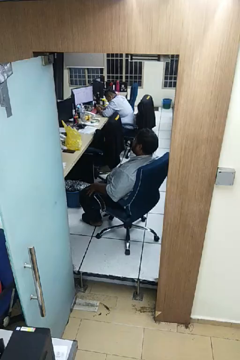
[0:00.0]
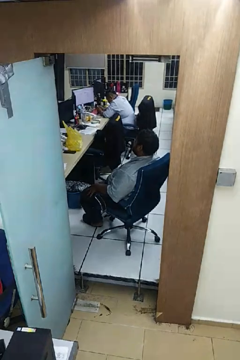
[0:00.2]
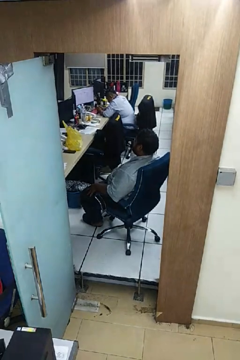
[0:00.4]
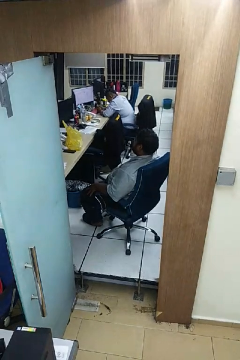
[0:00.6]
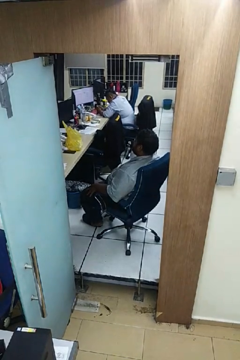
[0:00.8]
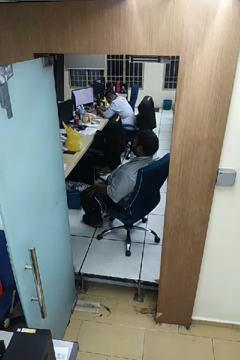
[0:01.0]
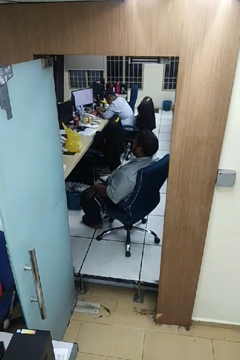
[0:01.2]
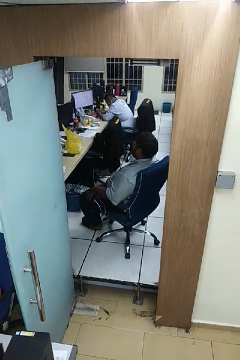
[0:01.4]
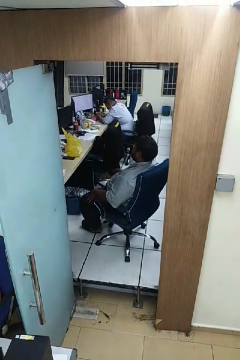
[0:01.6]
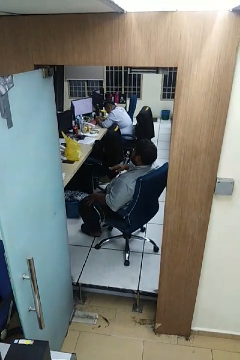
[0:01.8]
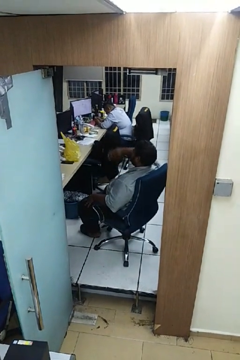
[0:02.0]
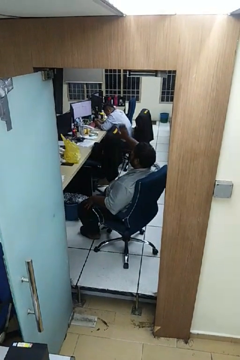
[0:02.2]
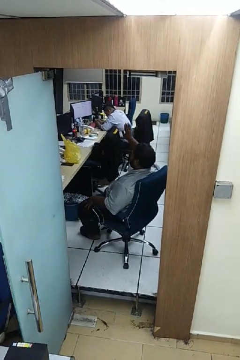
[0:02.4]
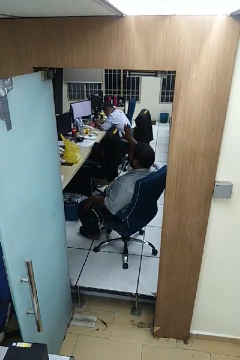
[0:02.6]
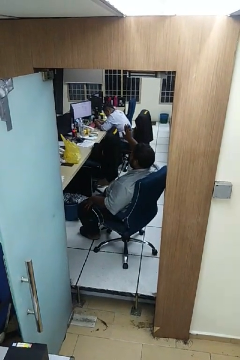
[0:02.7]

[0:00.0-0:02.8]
person gestures swipe up

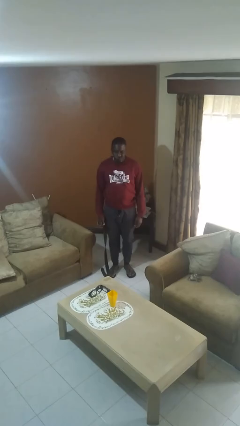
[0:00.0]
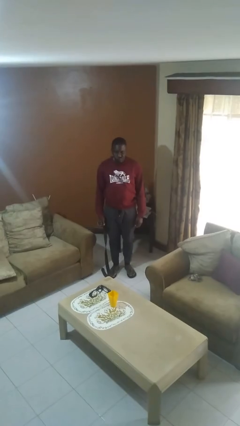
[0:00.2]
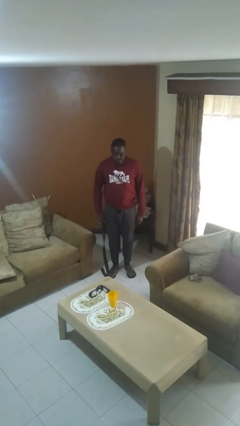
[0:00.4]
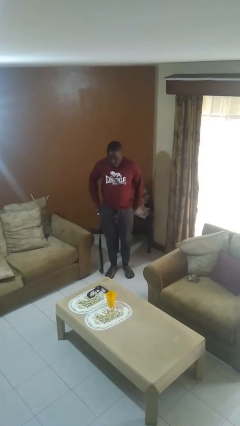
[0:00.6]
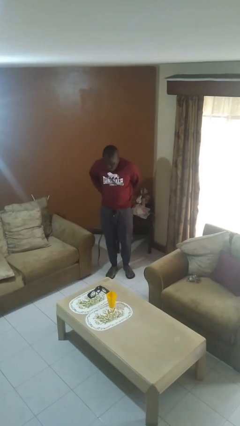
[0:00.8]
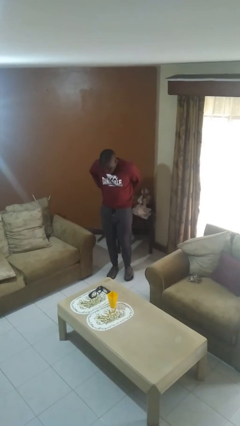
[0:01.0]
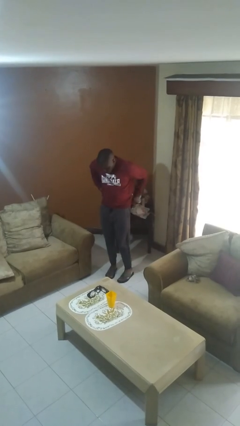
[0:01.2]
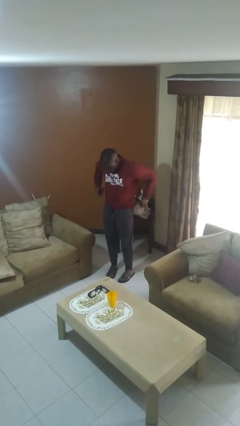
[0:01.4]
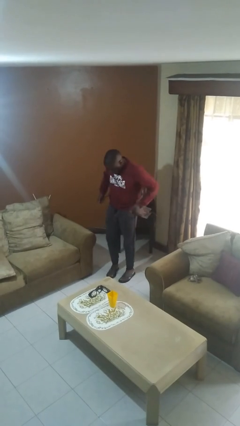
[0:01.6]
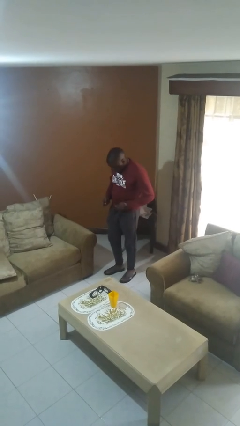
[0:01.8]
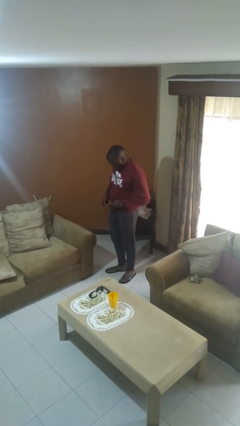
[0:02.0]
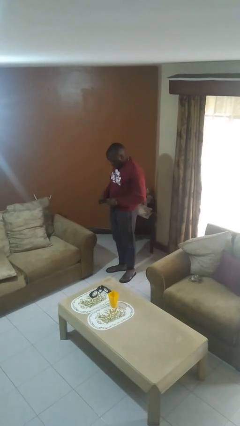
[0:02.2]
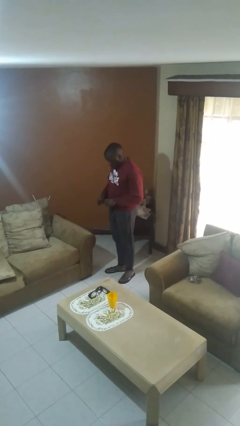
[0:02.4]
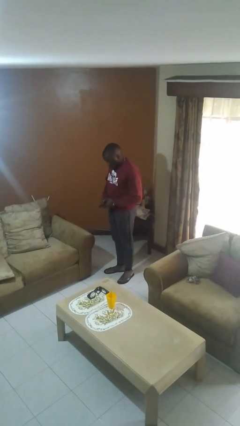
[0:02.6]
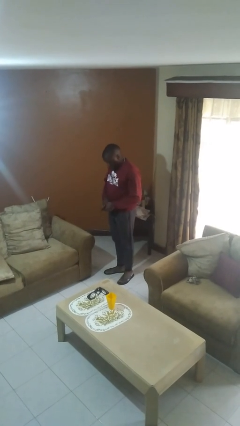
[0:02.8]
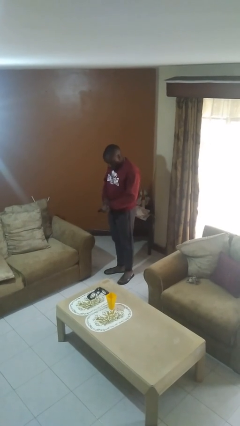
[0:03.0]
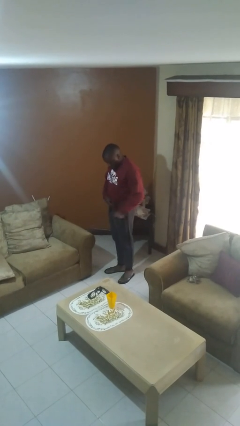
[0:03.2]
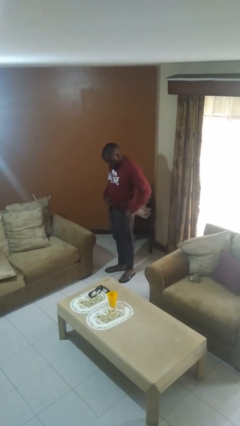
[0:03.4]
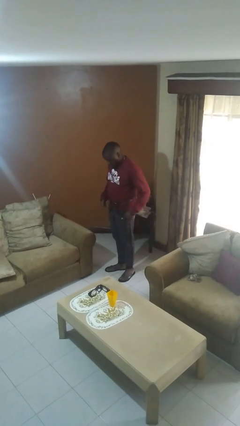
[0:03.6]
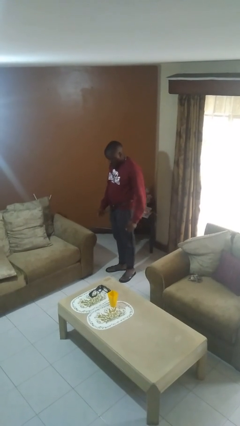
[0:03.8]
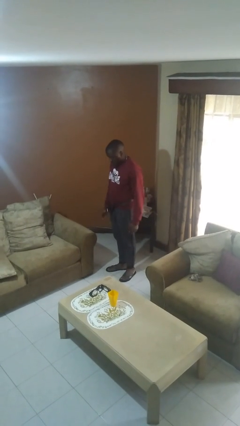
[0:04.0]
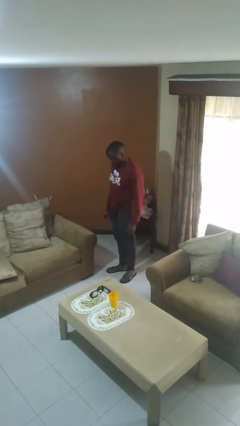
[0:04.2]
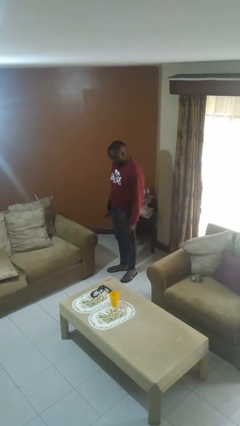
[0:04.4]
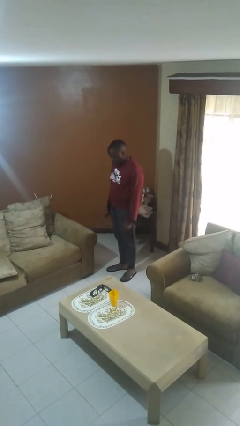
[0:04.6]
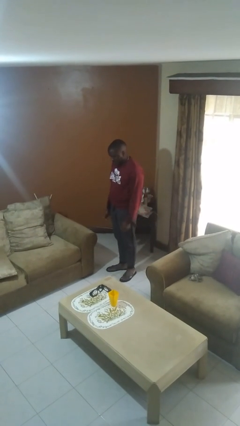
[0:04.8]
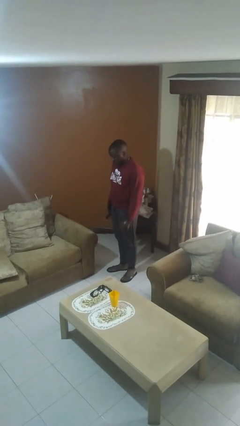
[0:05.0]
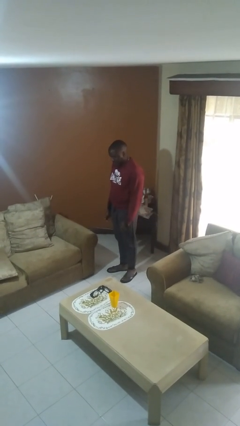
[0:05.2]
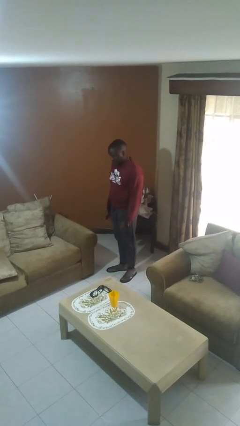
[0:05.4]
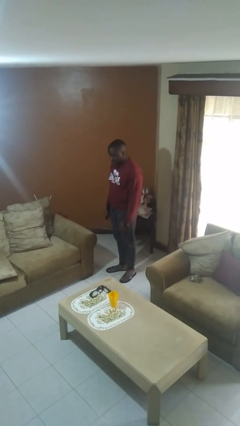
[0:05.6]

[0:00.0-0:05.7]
person puts on belt

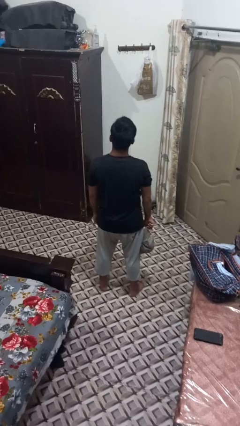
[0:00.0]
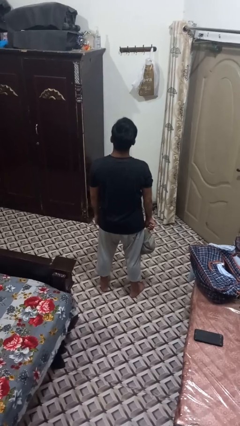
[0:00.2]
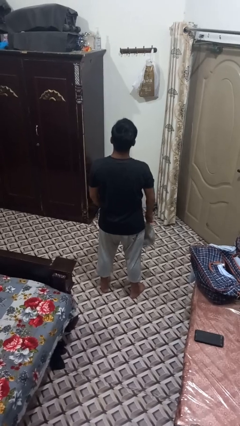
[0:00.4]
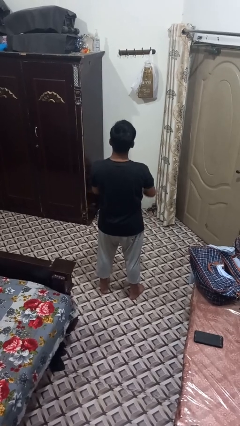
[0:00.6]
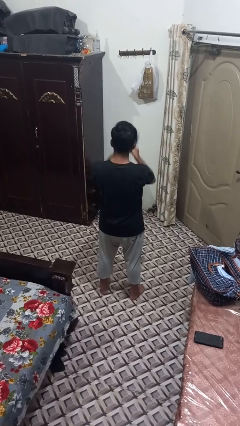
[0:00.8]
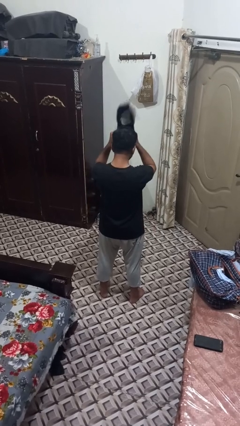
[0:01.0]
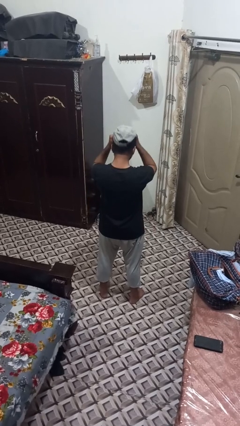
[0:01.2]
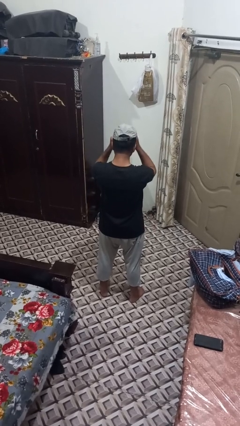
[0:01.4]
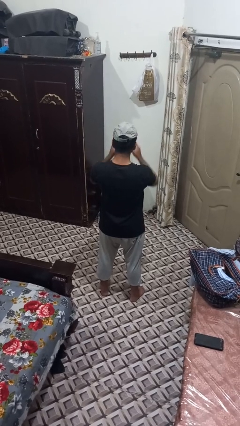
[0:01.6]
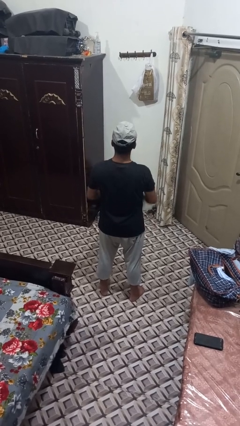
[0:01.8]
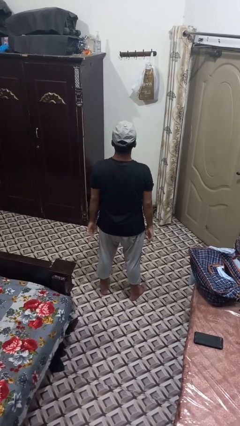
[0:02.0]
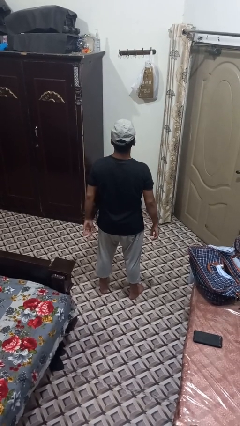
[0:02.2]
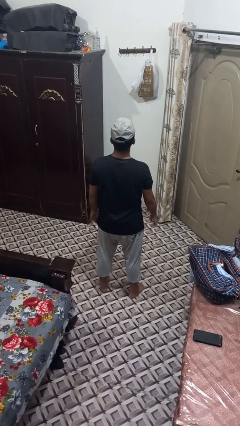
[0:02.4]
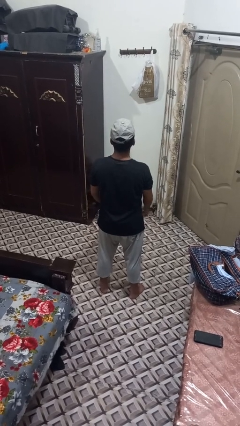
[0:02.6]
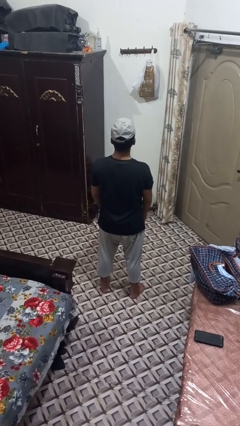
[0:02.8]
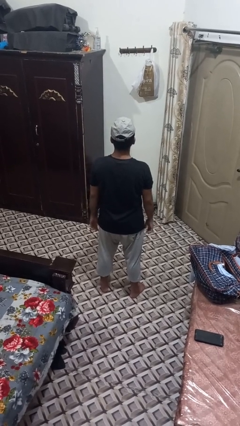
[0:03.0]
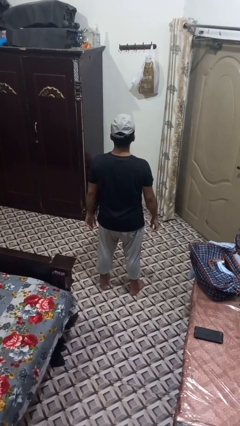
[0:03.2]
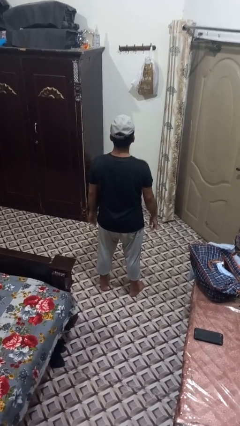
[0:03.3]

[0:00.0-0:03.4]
person puts on hat

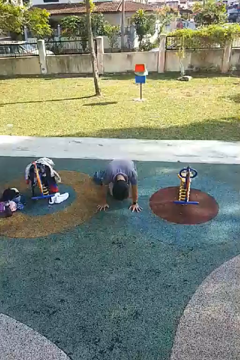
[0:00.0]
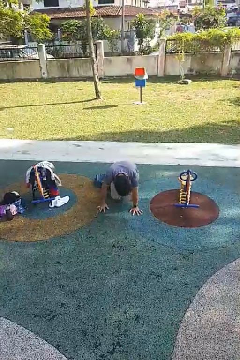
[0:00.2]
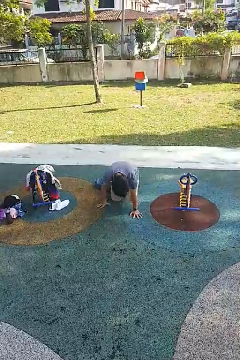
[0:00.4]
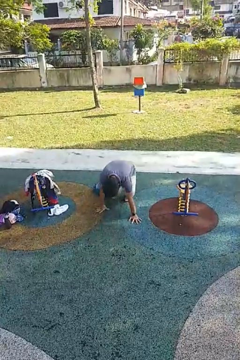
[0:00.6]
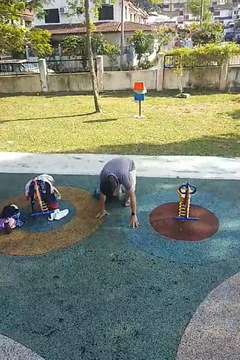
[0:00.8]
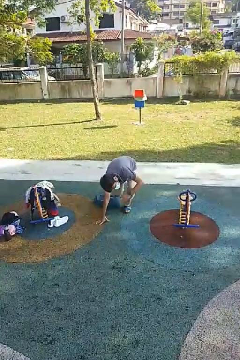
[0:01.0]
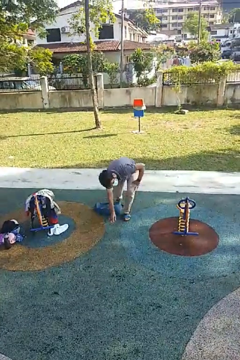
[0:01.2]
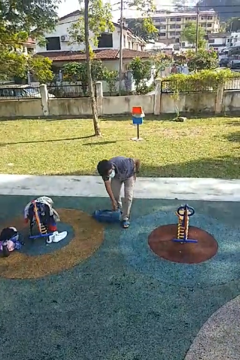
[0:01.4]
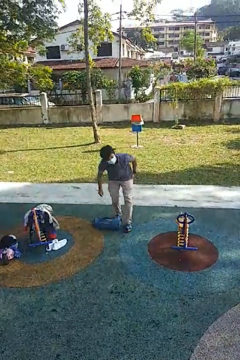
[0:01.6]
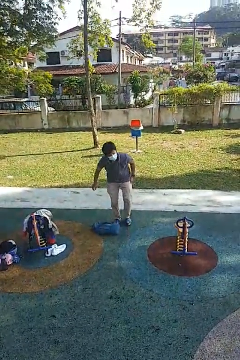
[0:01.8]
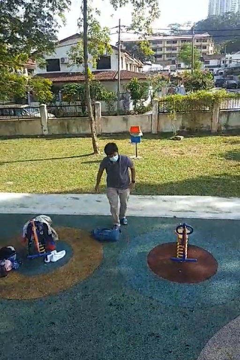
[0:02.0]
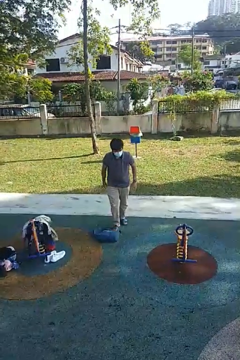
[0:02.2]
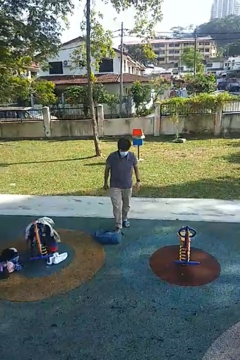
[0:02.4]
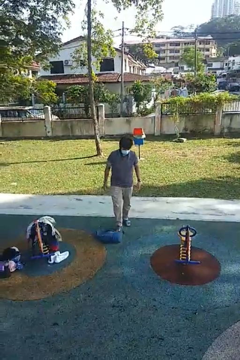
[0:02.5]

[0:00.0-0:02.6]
person stands up from floor

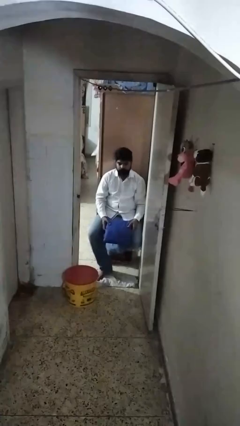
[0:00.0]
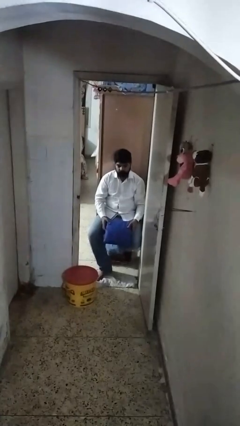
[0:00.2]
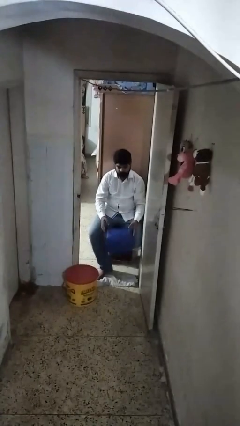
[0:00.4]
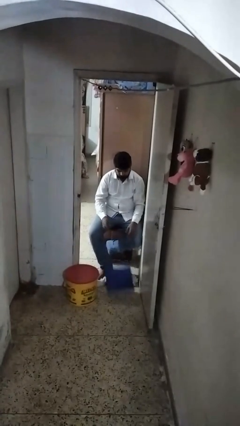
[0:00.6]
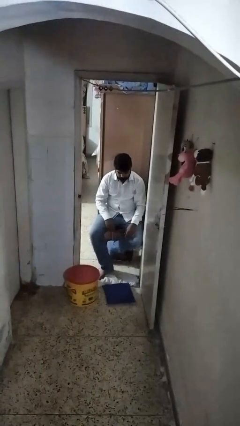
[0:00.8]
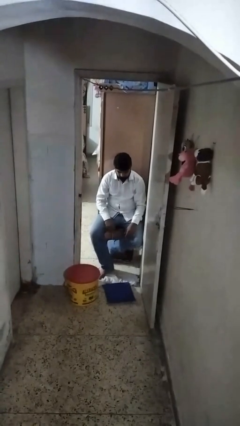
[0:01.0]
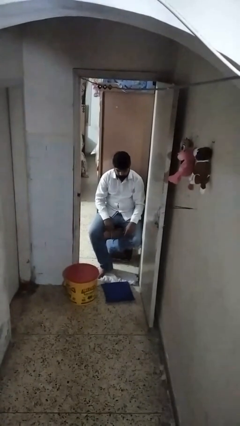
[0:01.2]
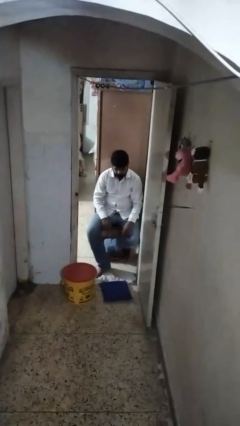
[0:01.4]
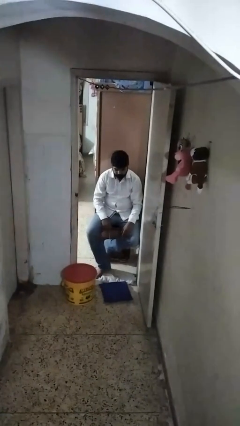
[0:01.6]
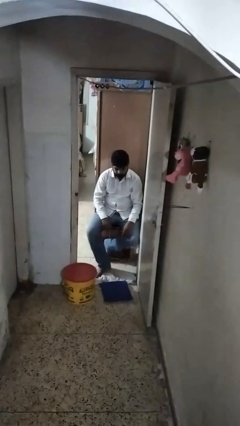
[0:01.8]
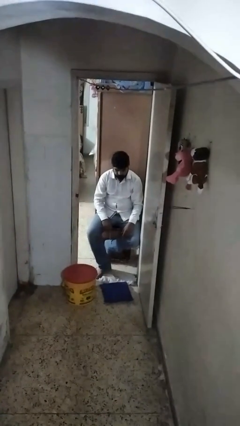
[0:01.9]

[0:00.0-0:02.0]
person drops object

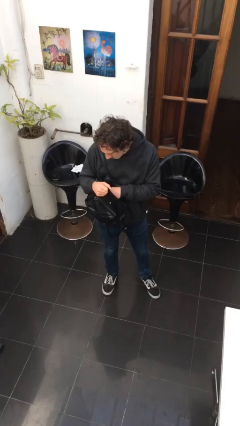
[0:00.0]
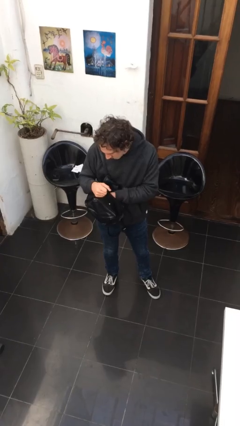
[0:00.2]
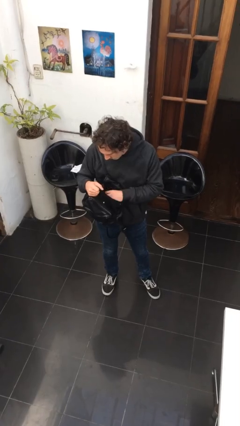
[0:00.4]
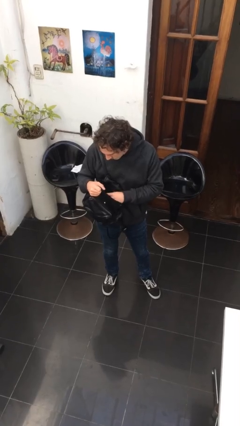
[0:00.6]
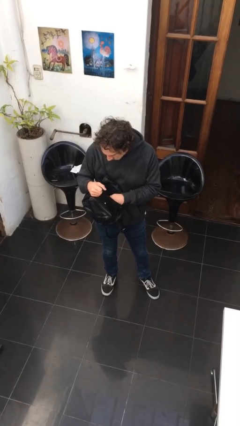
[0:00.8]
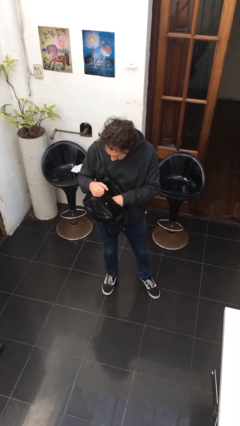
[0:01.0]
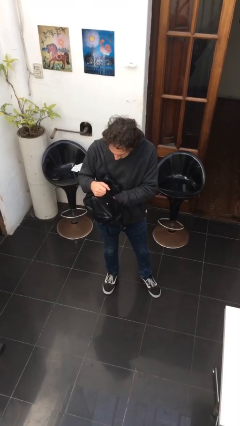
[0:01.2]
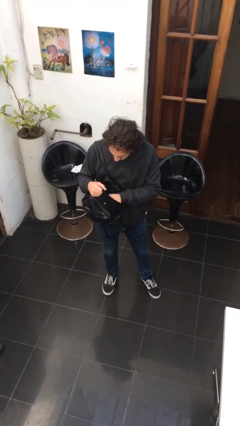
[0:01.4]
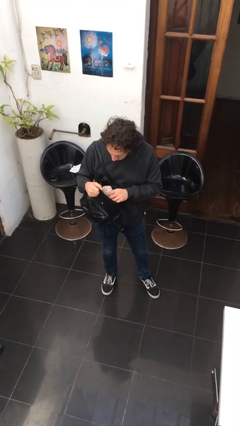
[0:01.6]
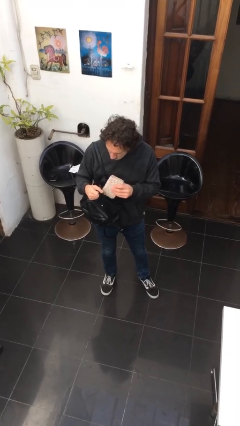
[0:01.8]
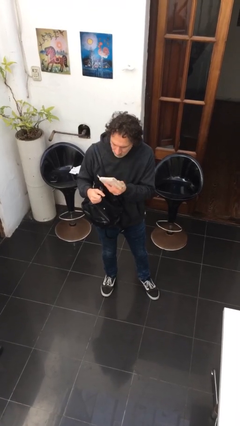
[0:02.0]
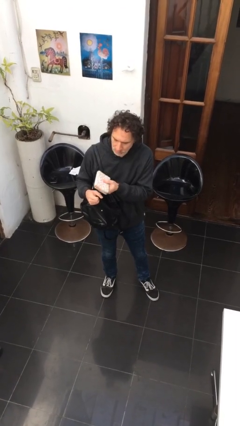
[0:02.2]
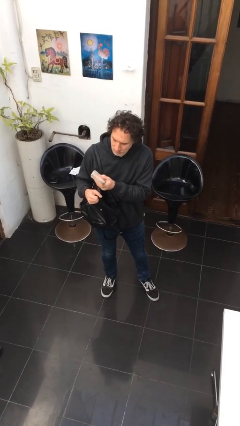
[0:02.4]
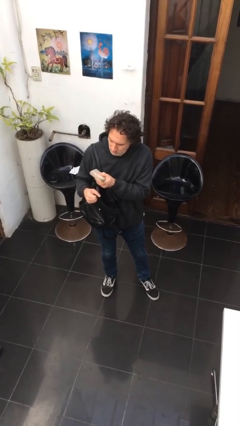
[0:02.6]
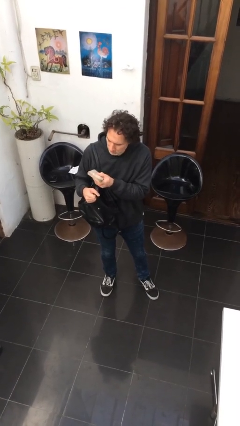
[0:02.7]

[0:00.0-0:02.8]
person takes object from purse
